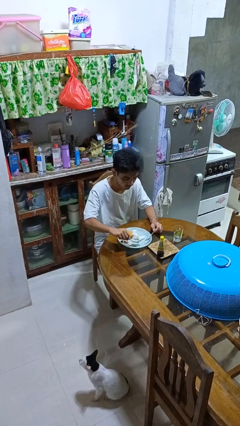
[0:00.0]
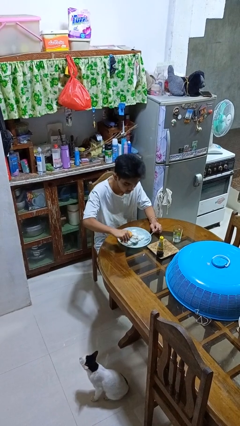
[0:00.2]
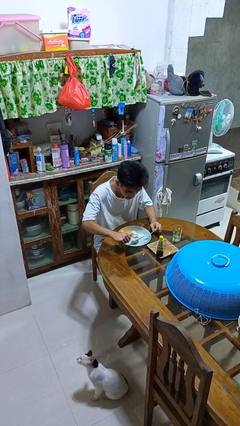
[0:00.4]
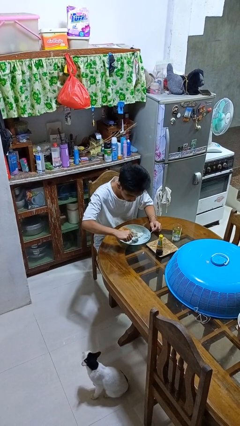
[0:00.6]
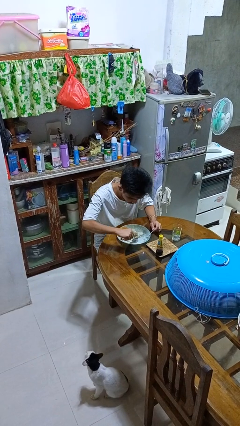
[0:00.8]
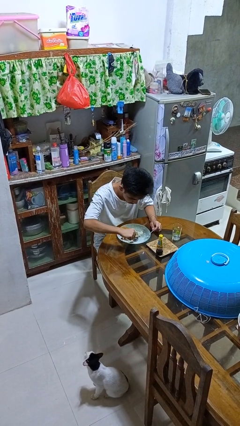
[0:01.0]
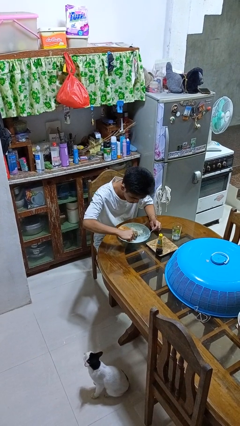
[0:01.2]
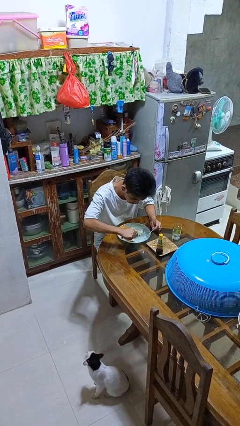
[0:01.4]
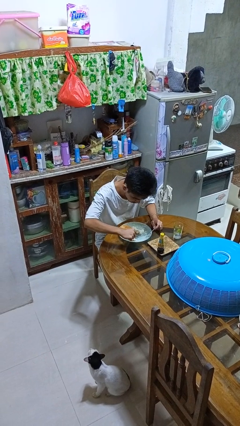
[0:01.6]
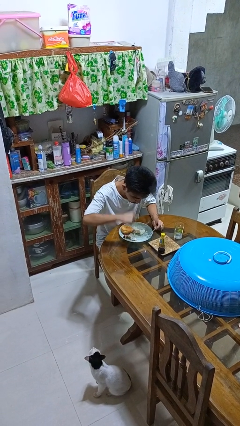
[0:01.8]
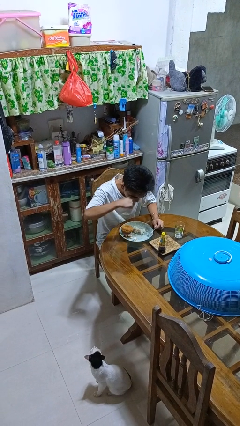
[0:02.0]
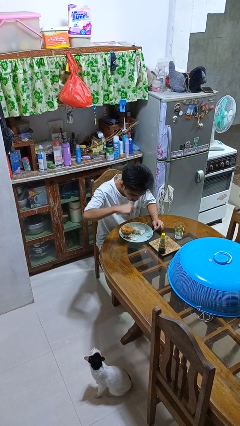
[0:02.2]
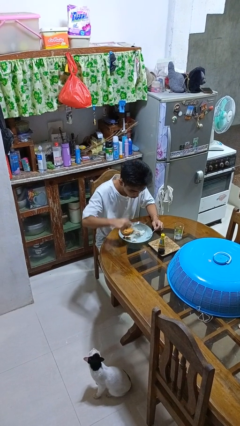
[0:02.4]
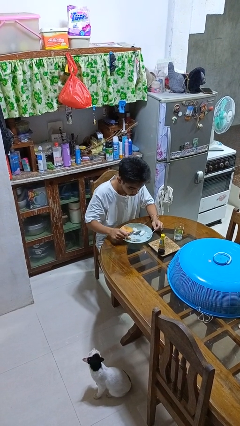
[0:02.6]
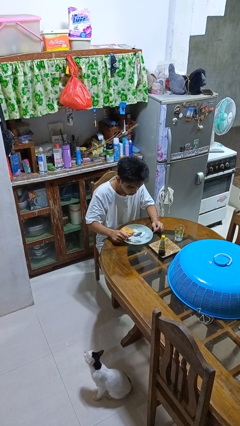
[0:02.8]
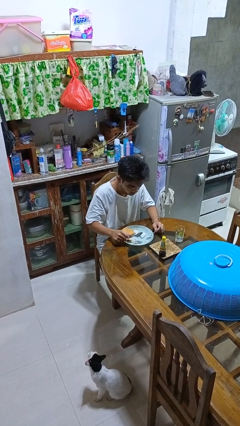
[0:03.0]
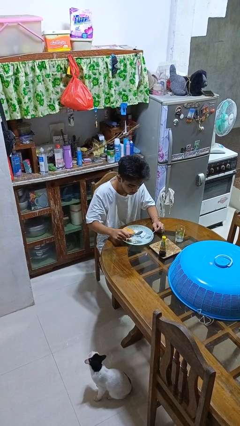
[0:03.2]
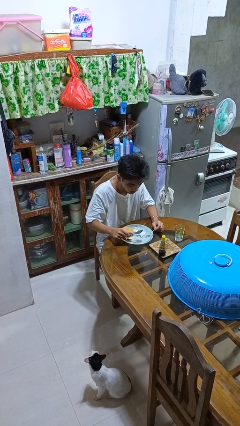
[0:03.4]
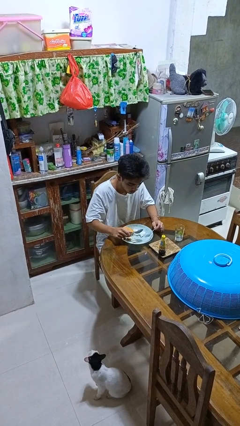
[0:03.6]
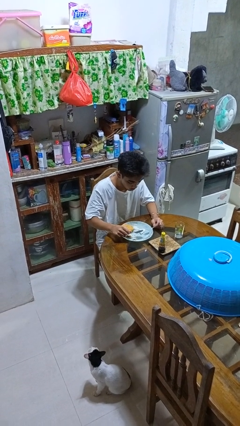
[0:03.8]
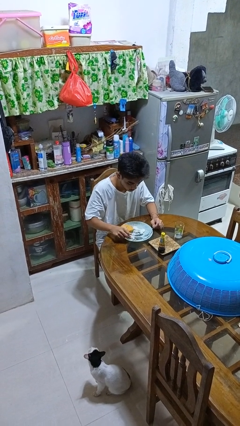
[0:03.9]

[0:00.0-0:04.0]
person eats with utensil

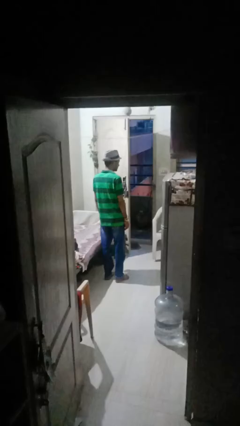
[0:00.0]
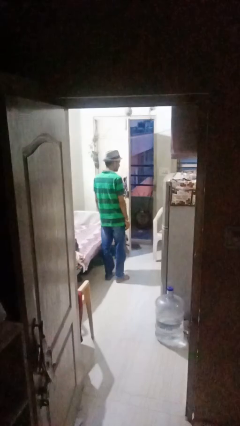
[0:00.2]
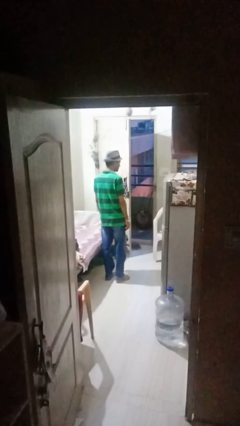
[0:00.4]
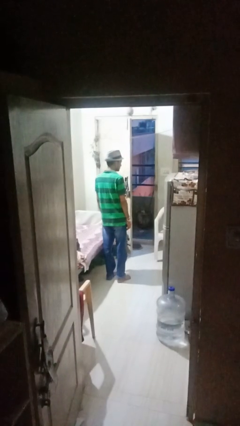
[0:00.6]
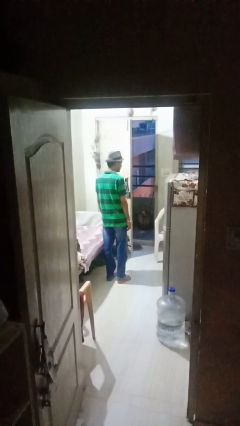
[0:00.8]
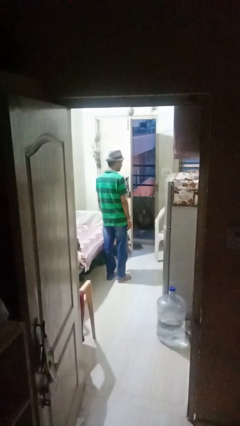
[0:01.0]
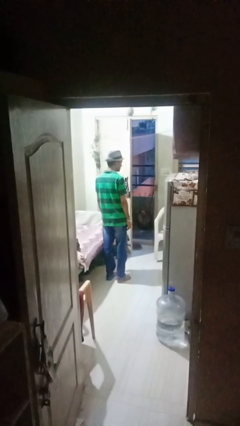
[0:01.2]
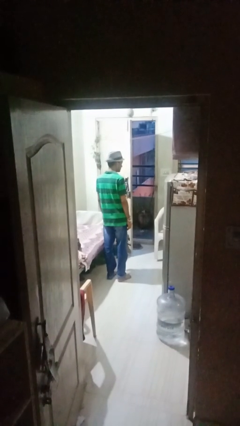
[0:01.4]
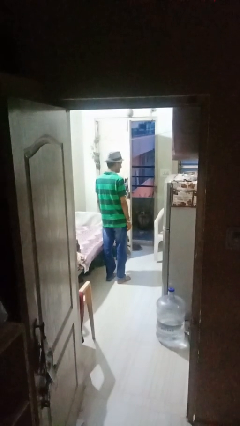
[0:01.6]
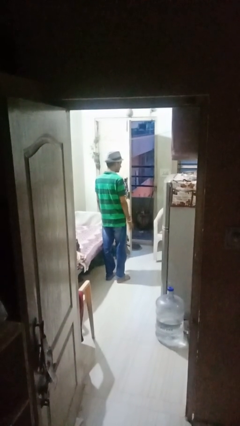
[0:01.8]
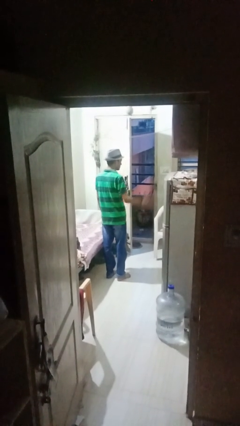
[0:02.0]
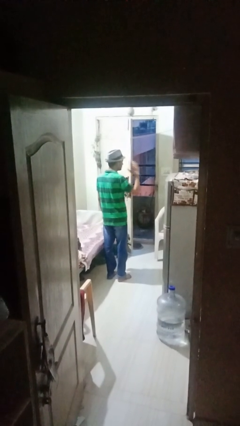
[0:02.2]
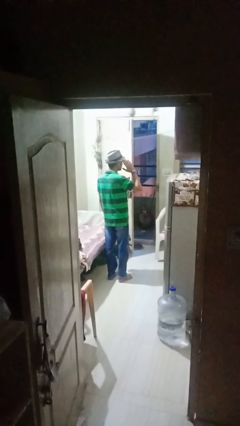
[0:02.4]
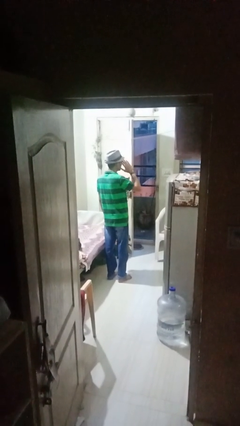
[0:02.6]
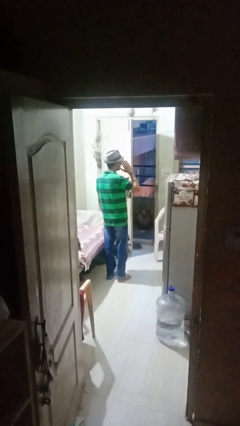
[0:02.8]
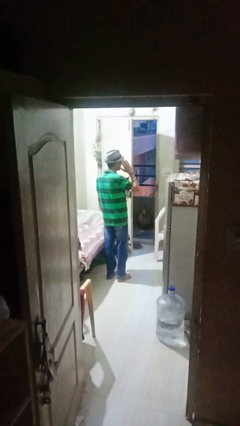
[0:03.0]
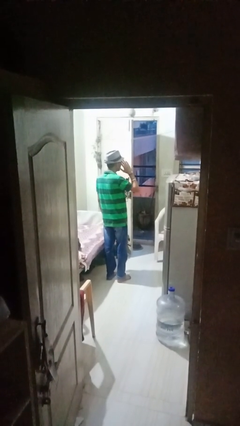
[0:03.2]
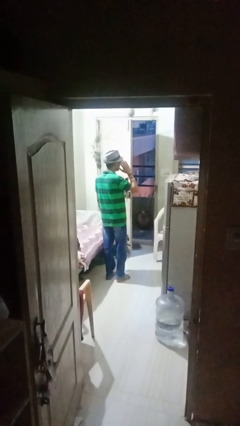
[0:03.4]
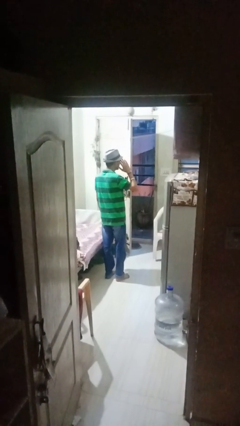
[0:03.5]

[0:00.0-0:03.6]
person salutes

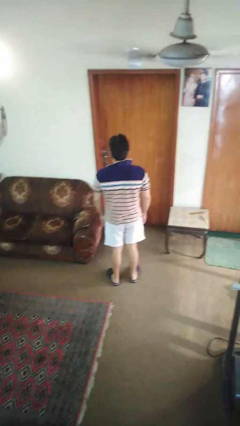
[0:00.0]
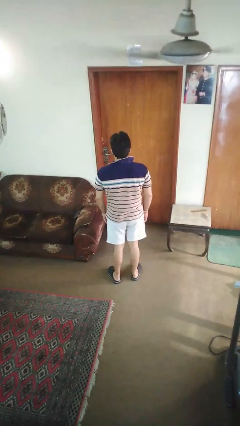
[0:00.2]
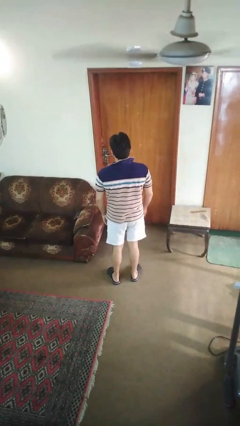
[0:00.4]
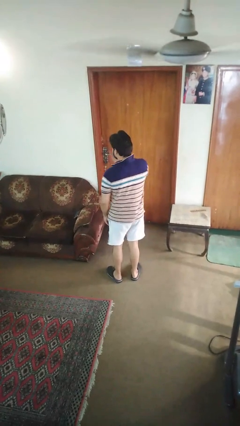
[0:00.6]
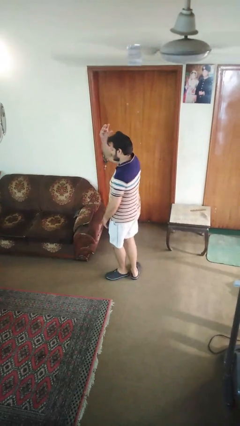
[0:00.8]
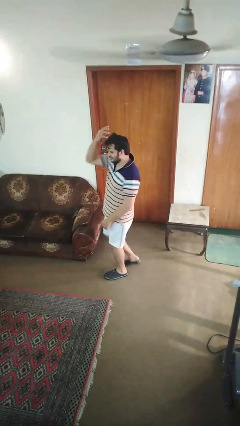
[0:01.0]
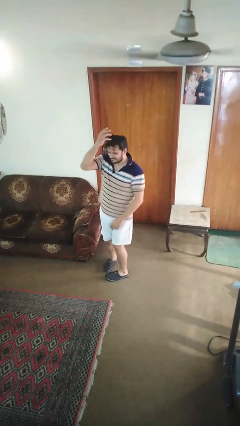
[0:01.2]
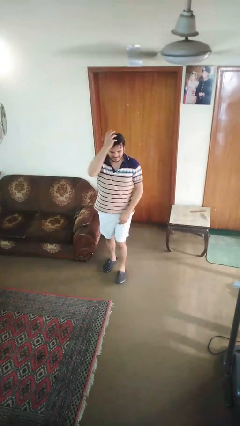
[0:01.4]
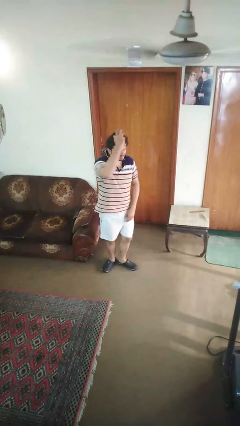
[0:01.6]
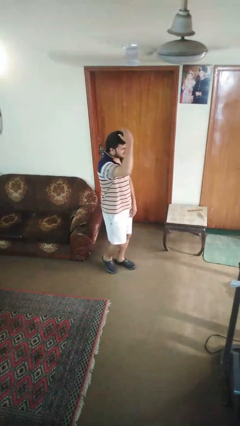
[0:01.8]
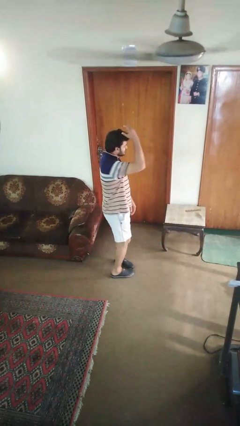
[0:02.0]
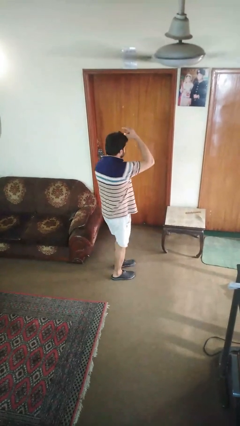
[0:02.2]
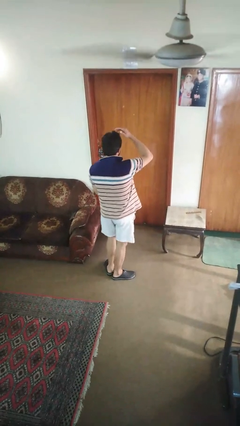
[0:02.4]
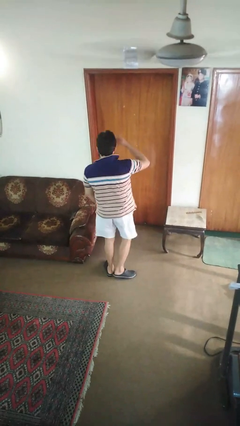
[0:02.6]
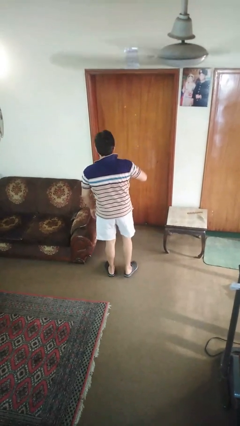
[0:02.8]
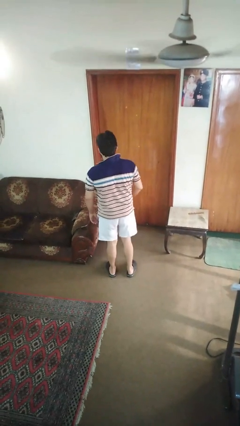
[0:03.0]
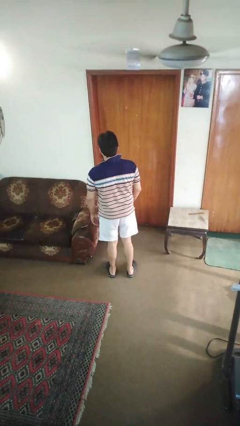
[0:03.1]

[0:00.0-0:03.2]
person twirls

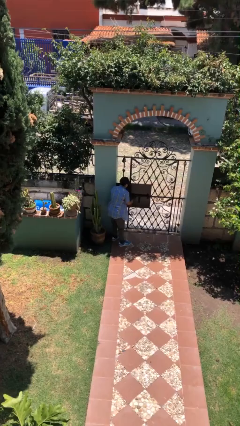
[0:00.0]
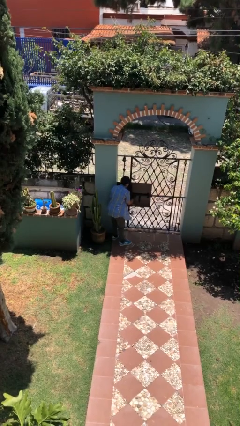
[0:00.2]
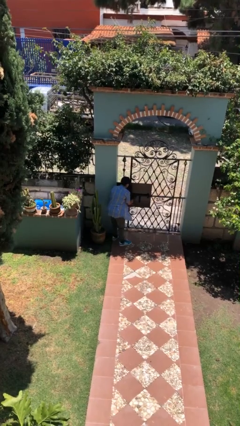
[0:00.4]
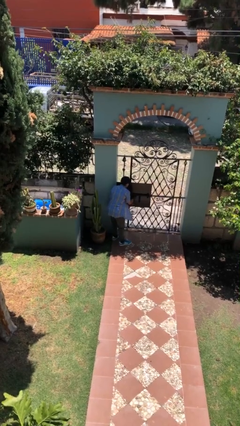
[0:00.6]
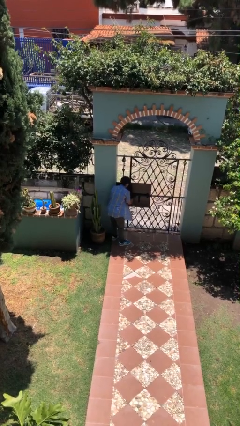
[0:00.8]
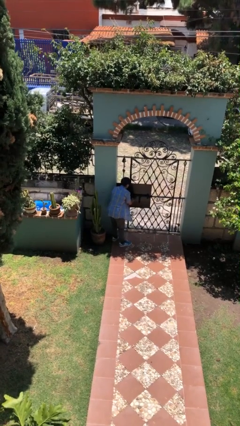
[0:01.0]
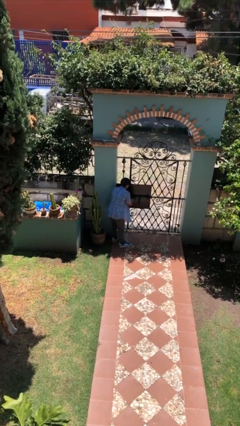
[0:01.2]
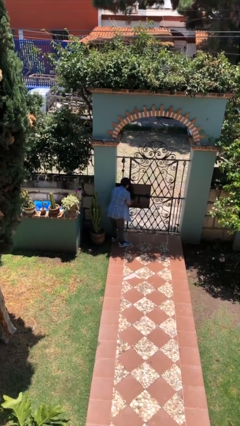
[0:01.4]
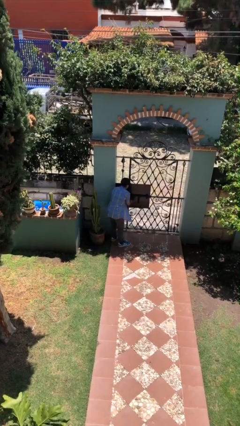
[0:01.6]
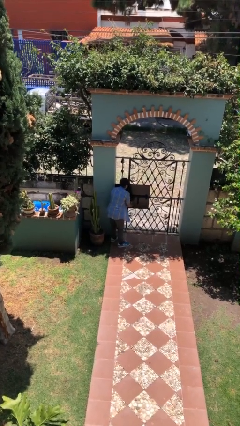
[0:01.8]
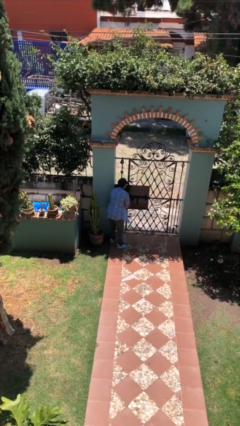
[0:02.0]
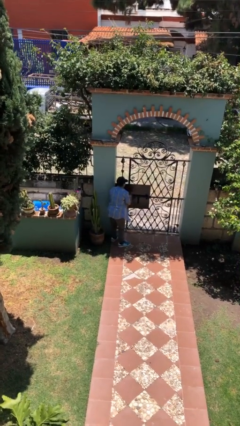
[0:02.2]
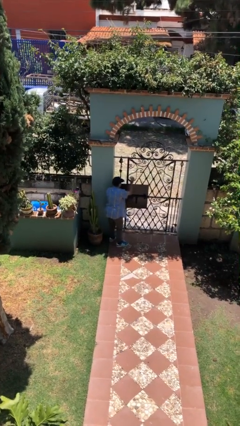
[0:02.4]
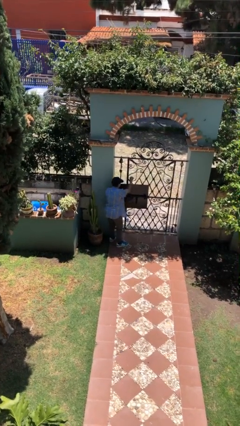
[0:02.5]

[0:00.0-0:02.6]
person unlocks door with keys

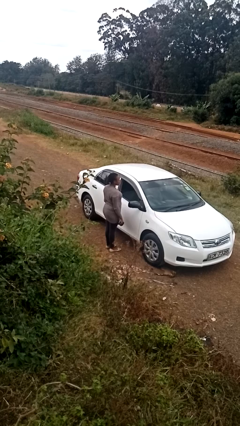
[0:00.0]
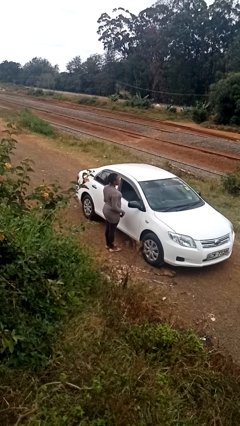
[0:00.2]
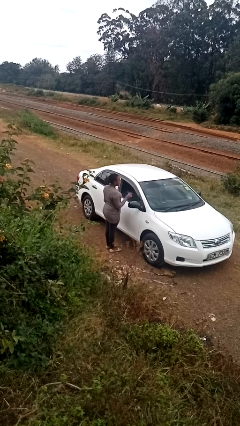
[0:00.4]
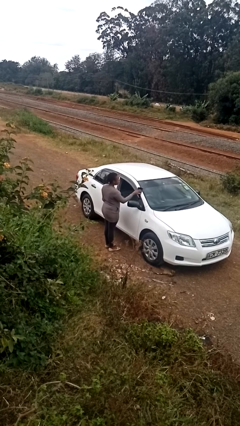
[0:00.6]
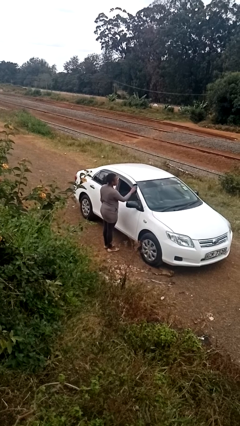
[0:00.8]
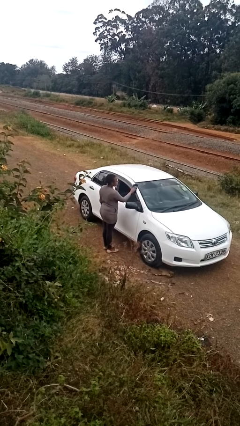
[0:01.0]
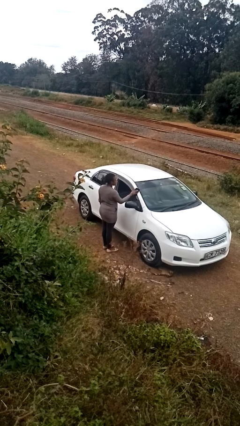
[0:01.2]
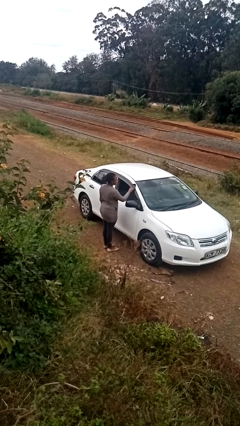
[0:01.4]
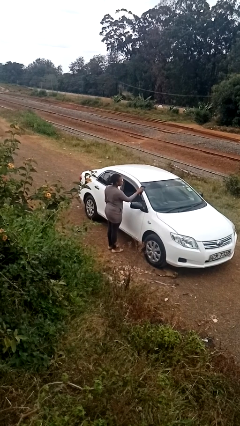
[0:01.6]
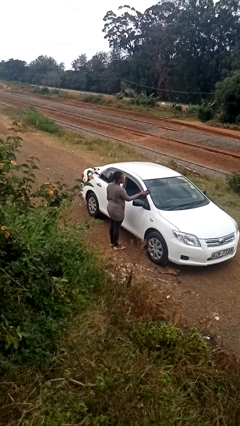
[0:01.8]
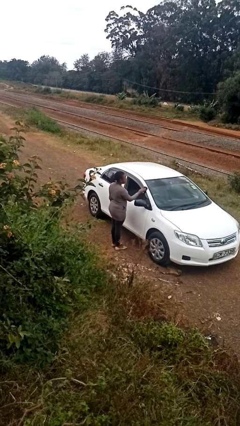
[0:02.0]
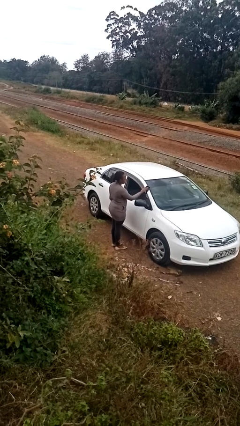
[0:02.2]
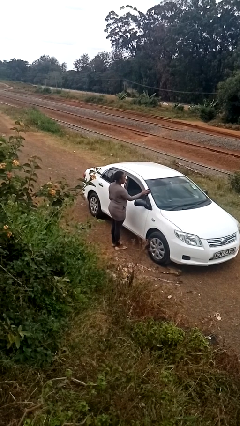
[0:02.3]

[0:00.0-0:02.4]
person polishes car with rag

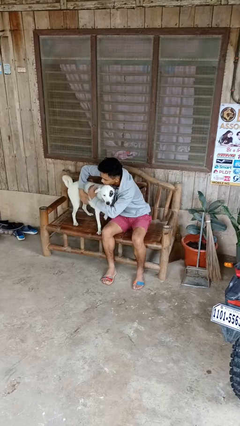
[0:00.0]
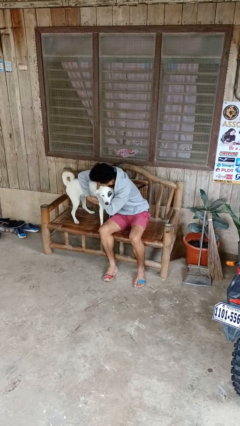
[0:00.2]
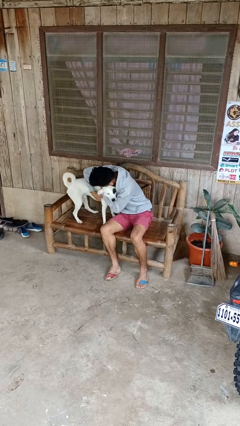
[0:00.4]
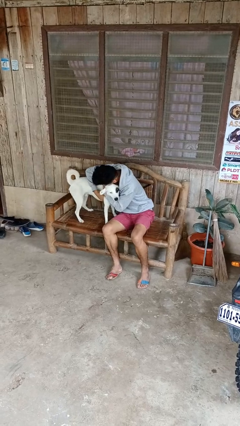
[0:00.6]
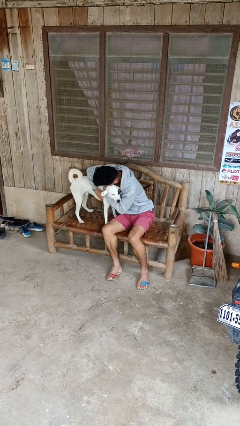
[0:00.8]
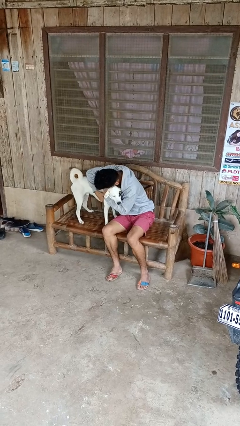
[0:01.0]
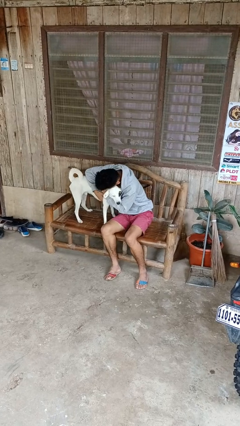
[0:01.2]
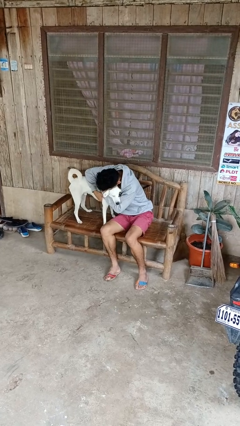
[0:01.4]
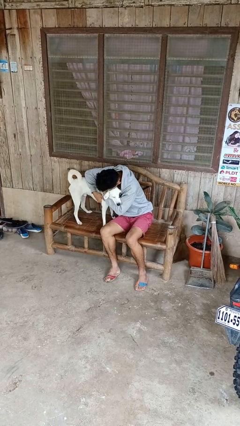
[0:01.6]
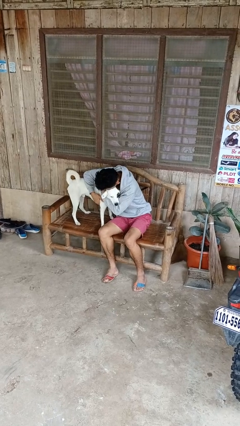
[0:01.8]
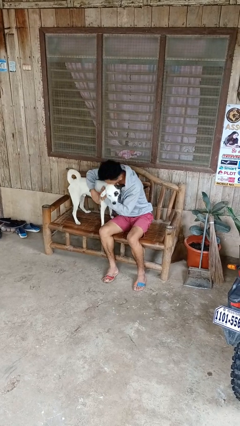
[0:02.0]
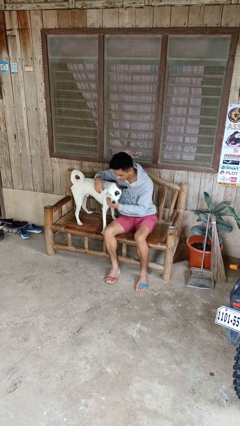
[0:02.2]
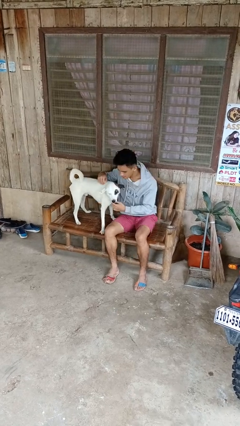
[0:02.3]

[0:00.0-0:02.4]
person hugs dog
